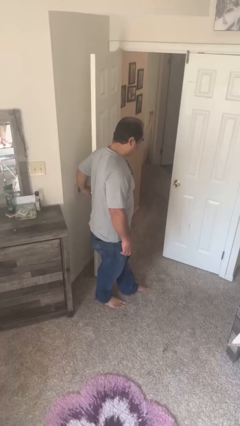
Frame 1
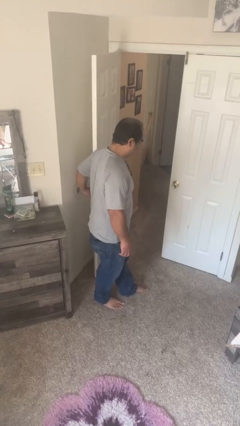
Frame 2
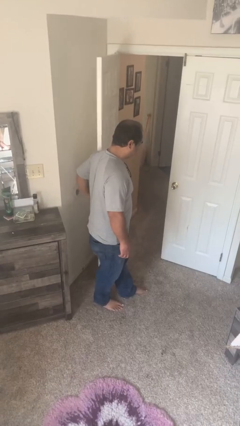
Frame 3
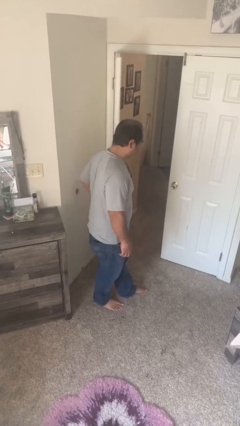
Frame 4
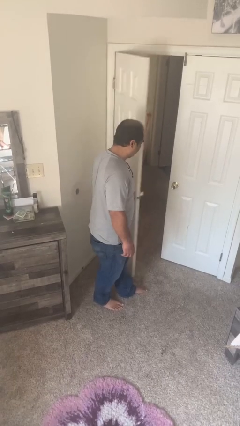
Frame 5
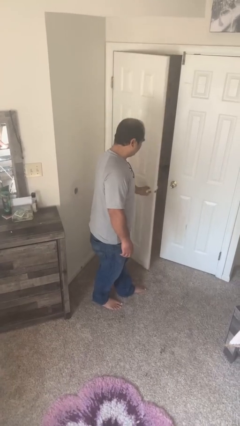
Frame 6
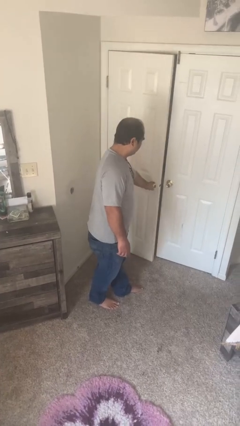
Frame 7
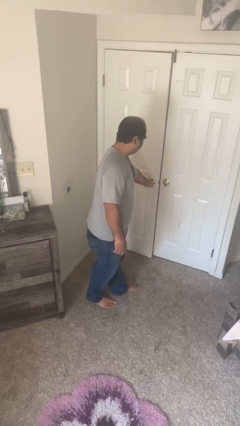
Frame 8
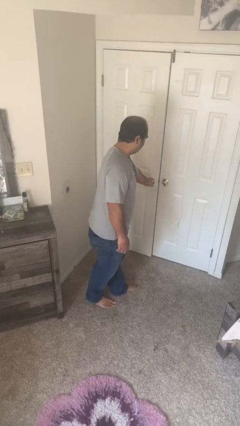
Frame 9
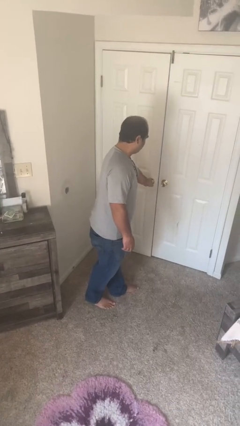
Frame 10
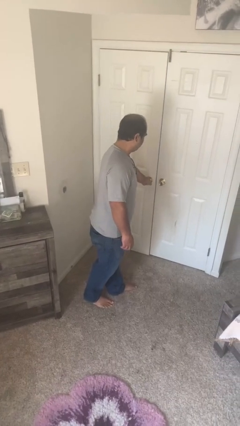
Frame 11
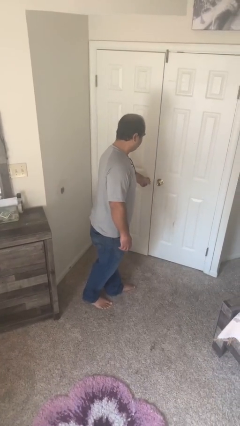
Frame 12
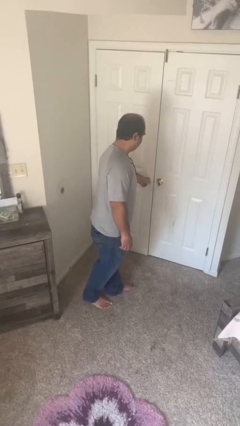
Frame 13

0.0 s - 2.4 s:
person closes facility door

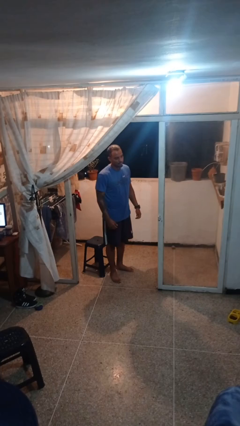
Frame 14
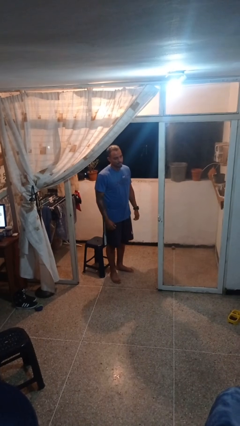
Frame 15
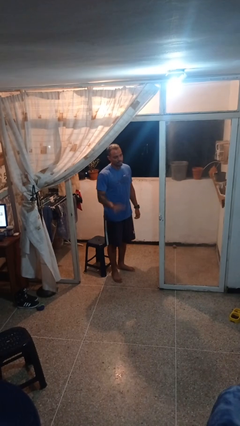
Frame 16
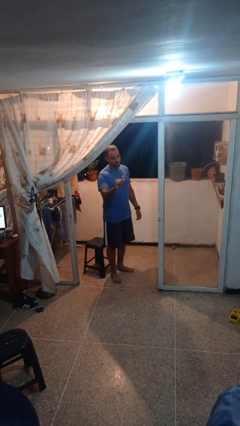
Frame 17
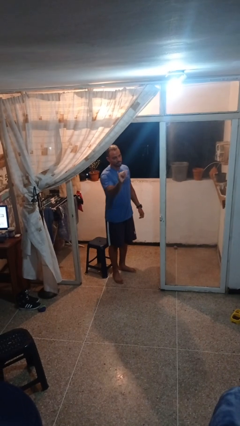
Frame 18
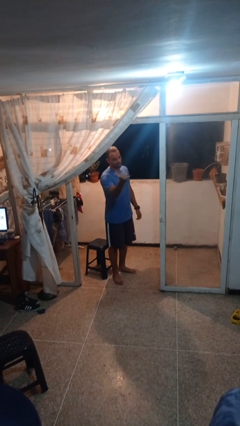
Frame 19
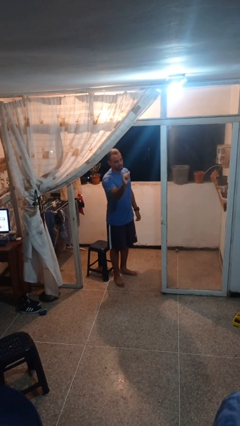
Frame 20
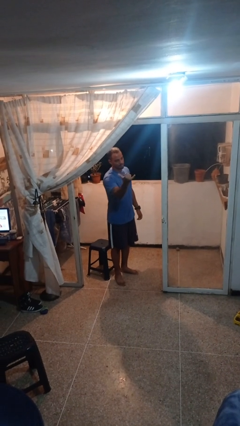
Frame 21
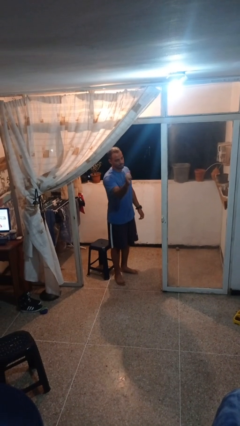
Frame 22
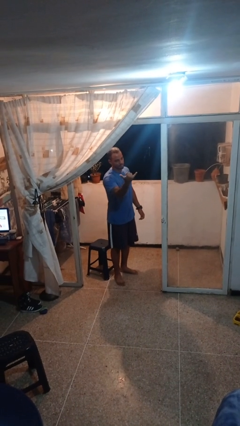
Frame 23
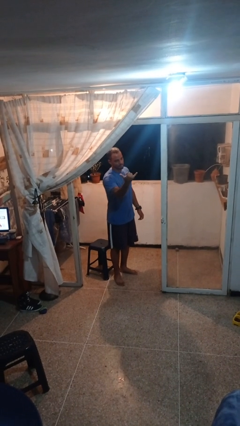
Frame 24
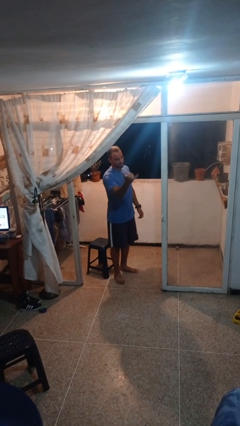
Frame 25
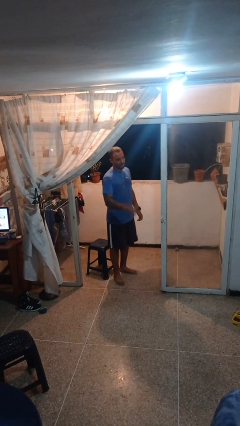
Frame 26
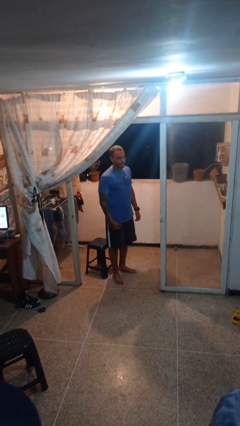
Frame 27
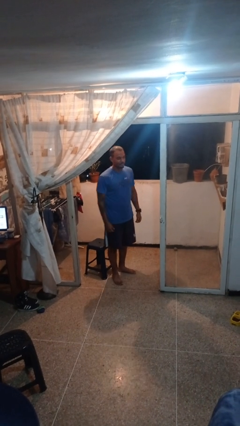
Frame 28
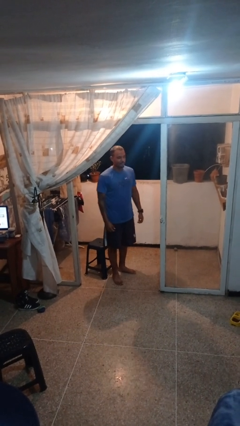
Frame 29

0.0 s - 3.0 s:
person gestures hang loose

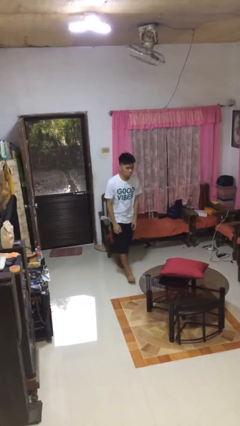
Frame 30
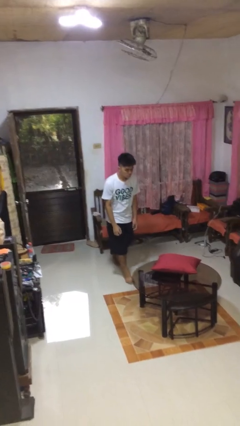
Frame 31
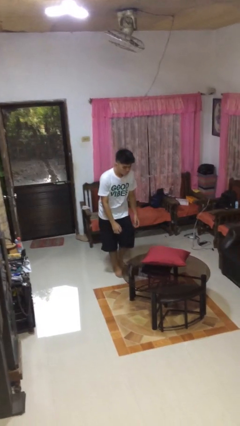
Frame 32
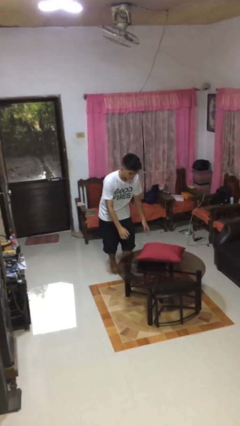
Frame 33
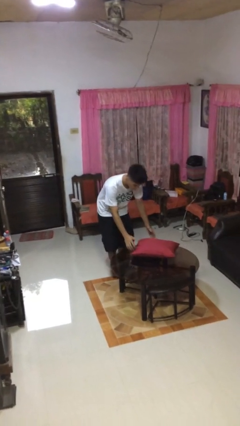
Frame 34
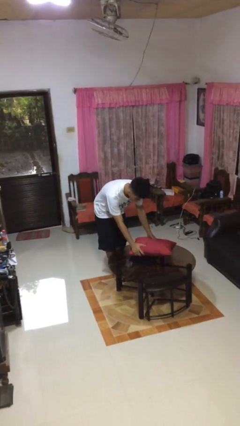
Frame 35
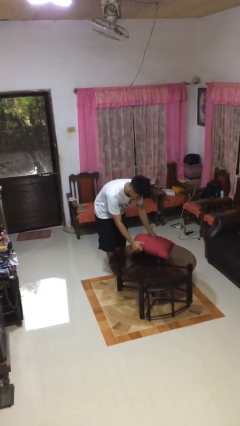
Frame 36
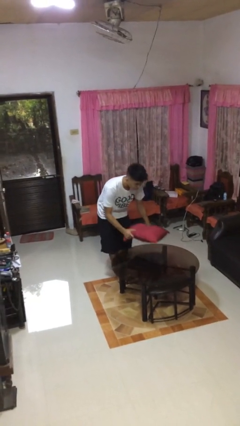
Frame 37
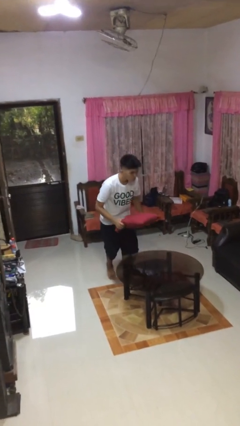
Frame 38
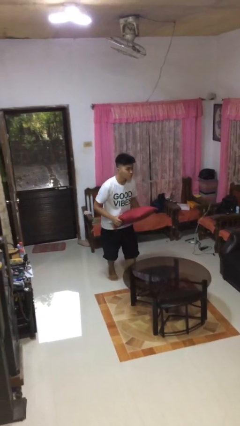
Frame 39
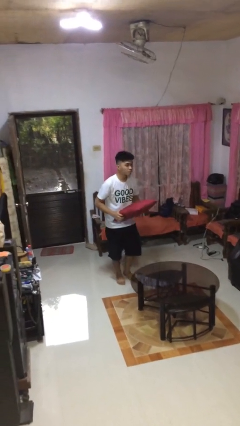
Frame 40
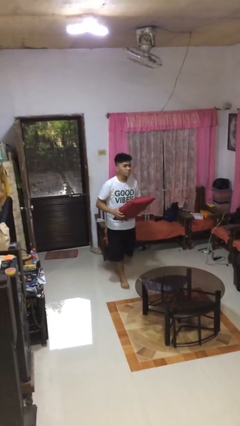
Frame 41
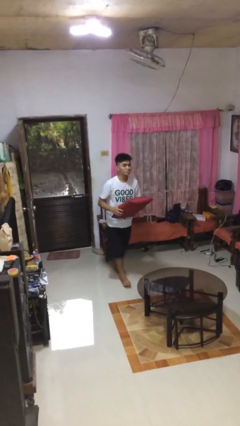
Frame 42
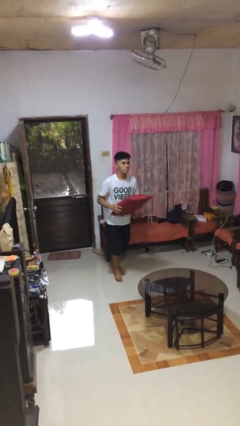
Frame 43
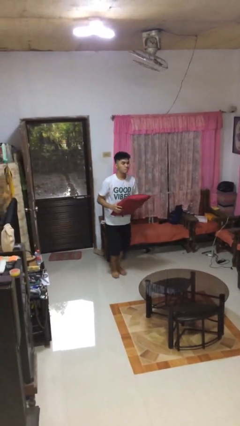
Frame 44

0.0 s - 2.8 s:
person picks up object from table

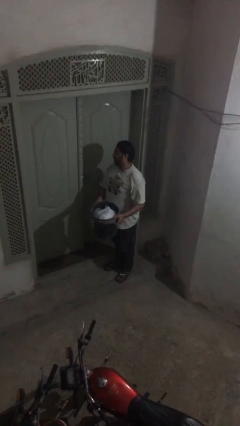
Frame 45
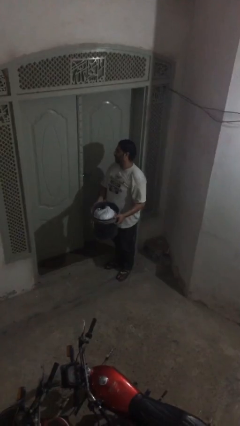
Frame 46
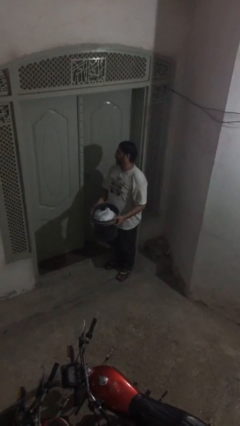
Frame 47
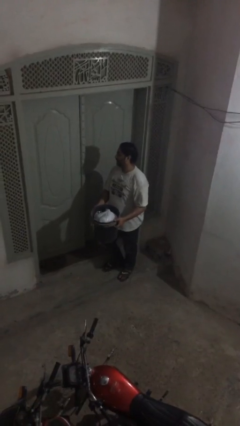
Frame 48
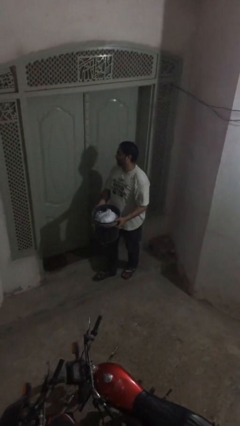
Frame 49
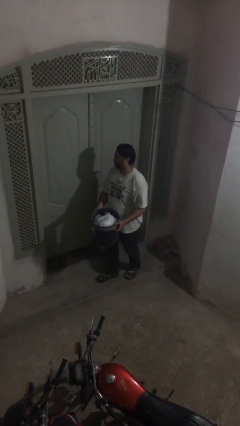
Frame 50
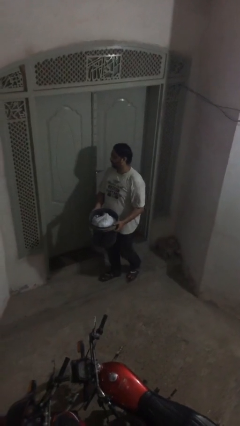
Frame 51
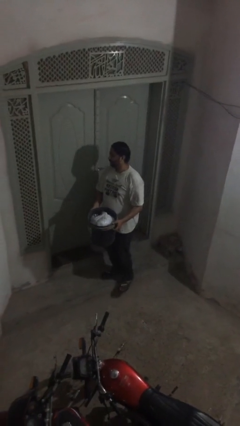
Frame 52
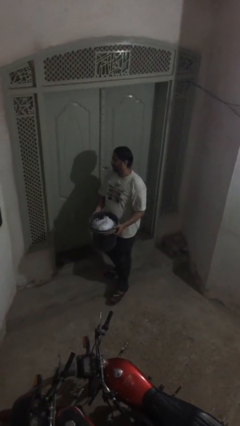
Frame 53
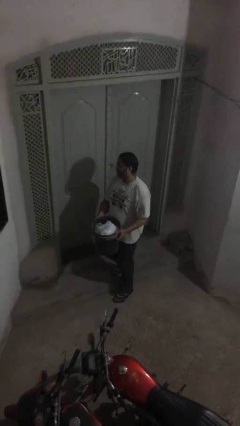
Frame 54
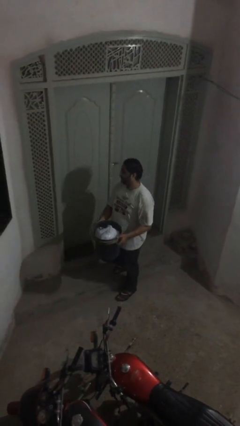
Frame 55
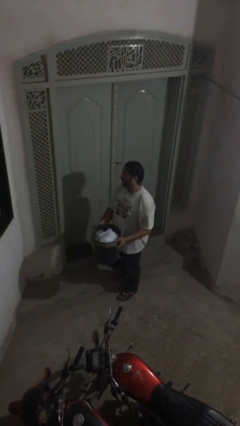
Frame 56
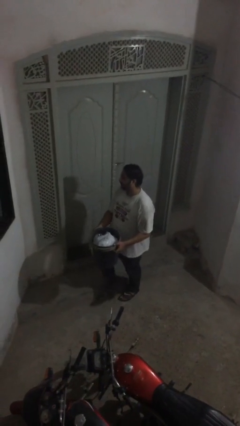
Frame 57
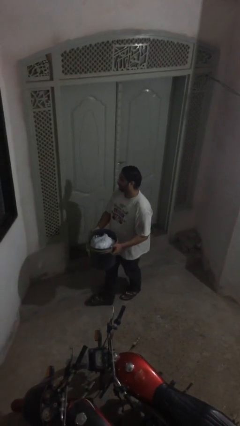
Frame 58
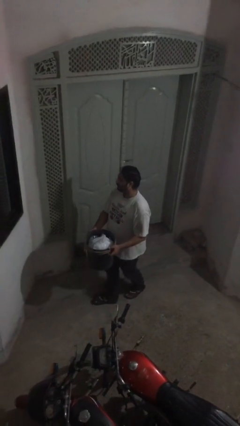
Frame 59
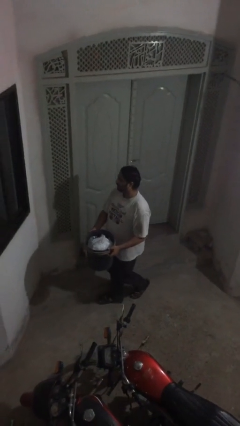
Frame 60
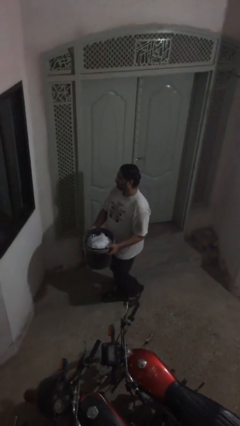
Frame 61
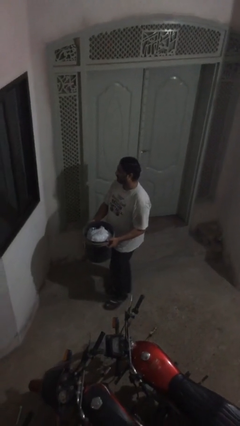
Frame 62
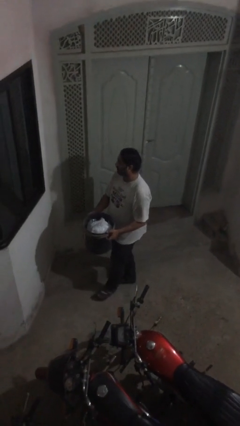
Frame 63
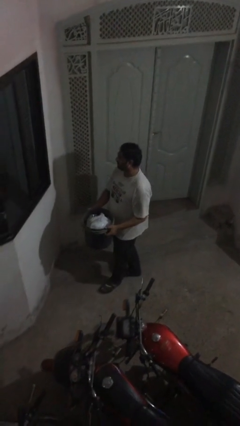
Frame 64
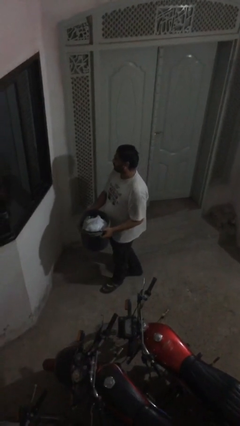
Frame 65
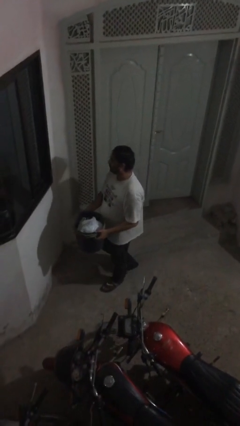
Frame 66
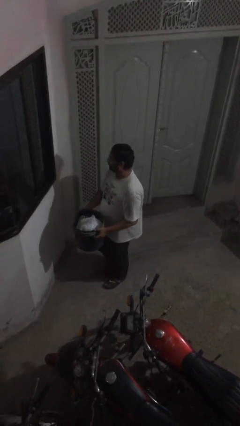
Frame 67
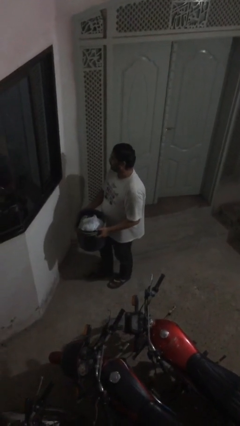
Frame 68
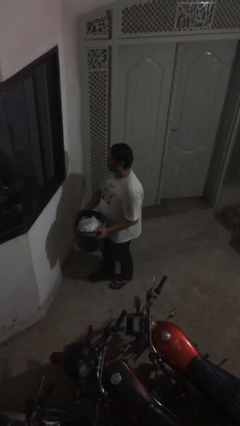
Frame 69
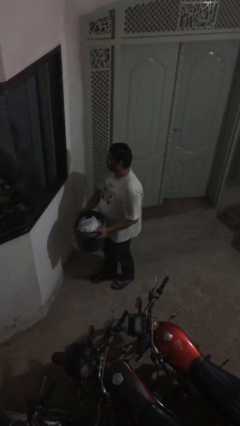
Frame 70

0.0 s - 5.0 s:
person carries heavy object

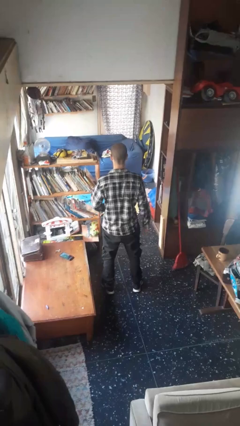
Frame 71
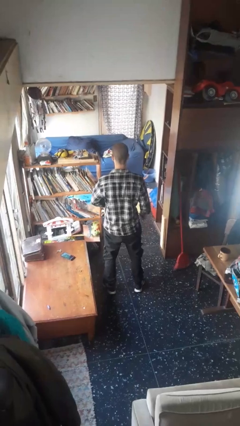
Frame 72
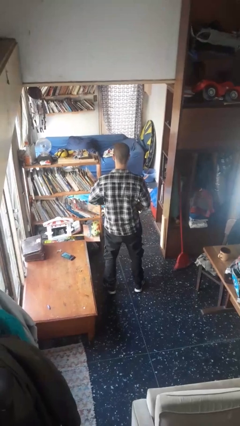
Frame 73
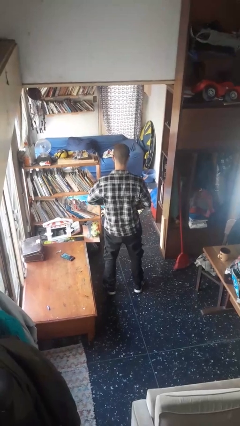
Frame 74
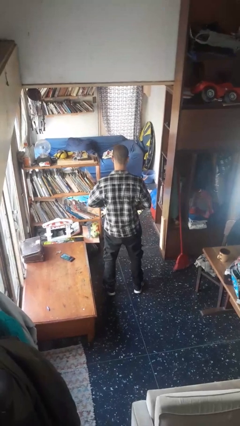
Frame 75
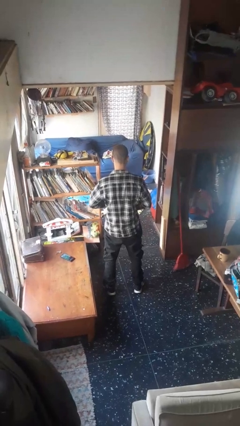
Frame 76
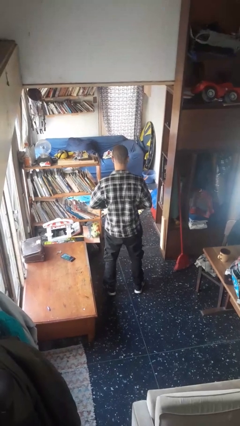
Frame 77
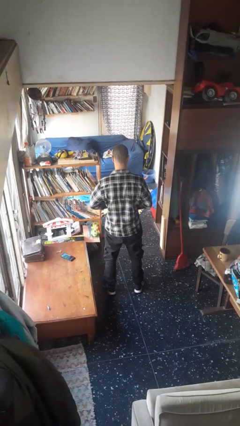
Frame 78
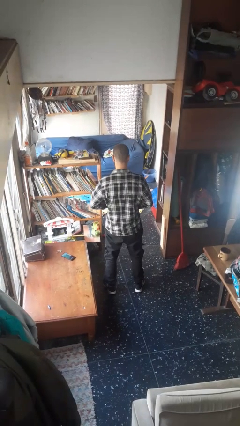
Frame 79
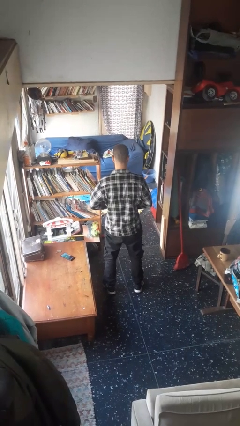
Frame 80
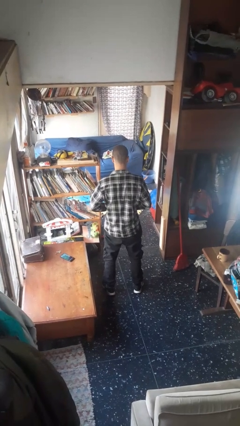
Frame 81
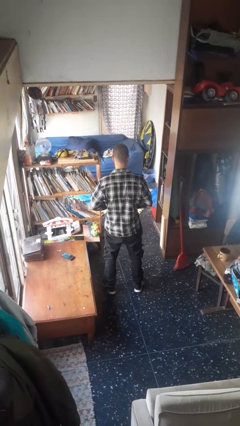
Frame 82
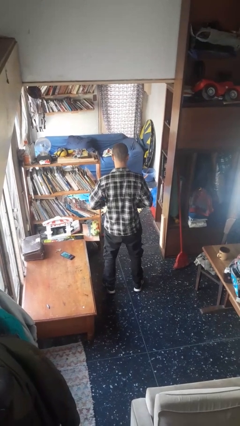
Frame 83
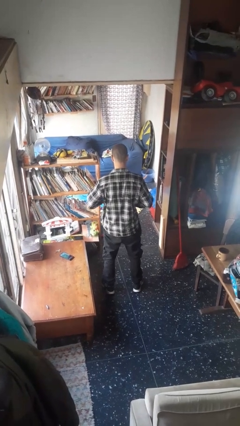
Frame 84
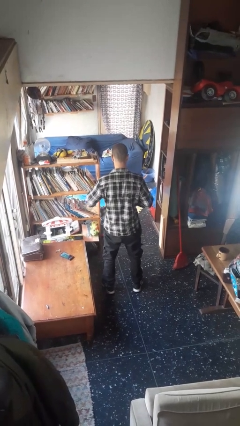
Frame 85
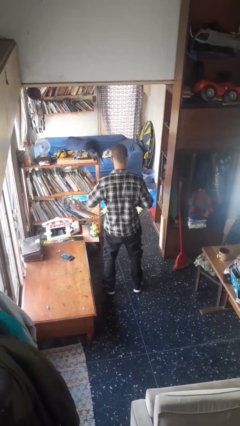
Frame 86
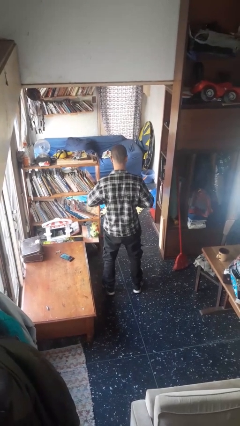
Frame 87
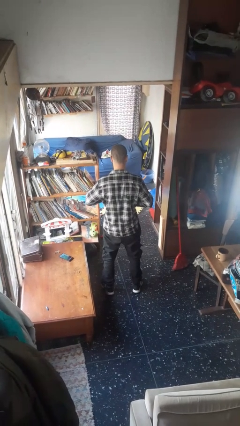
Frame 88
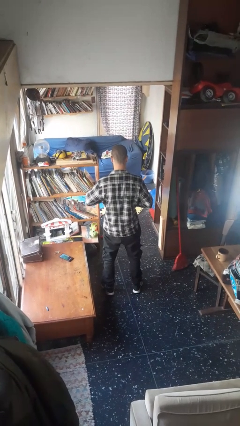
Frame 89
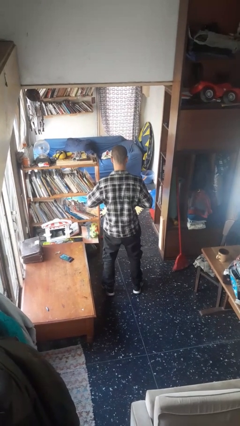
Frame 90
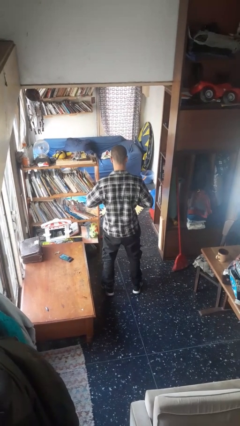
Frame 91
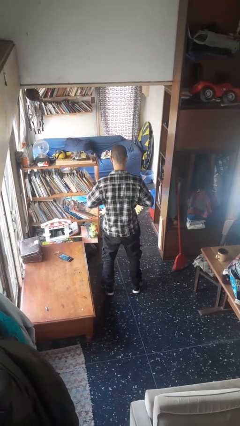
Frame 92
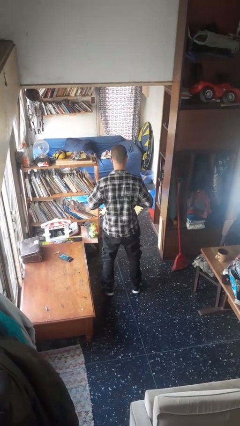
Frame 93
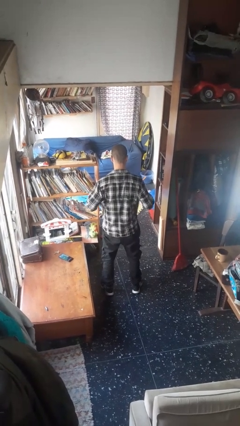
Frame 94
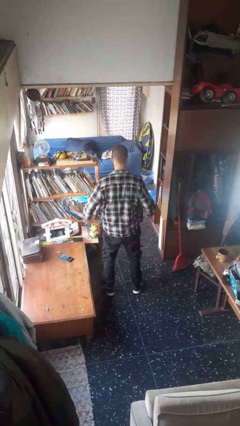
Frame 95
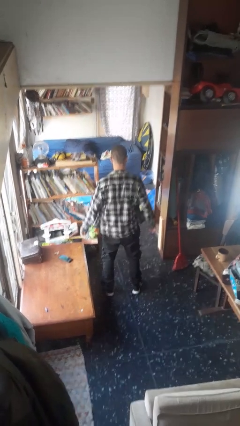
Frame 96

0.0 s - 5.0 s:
person unbuttons shirt
